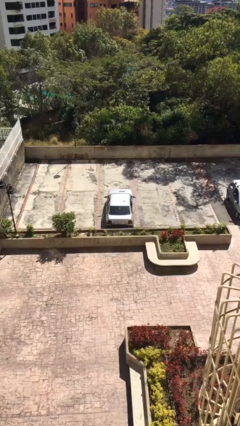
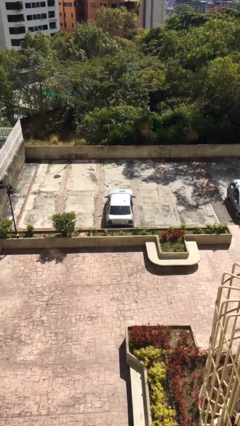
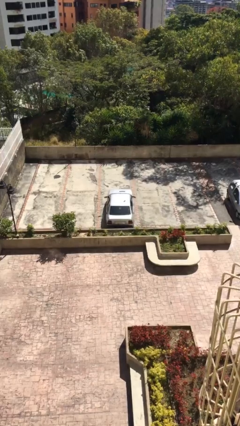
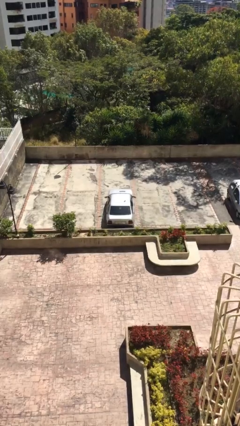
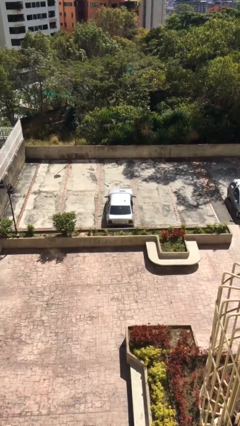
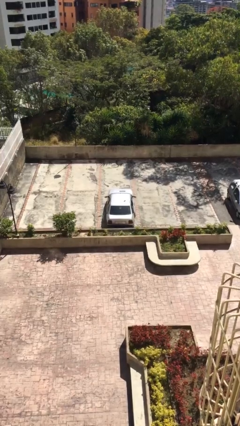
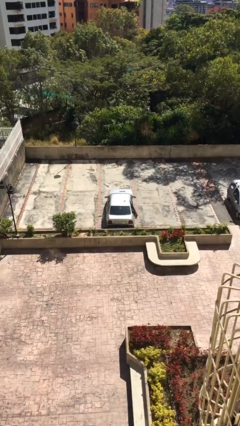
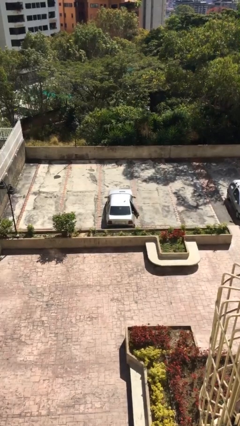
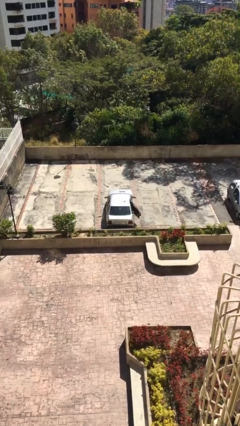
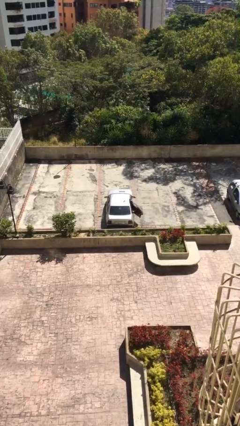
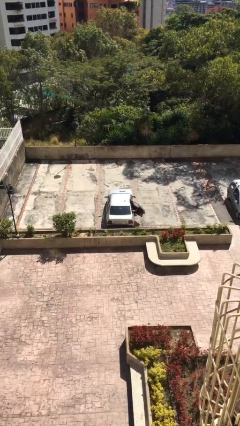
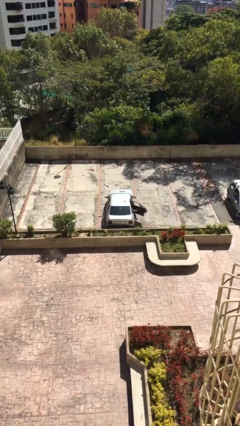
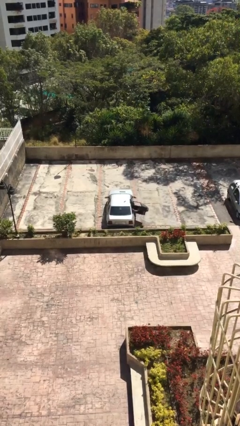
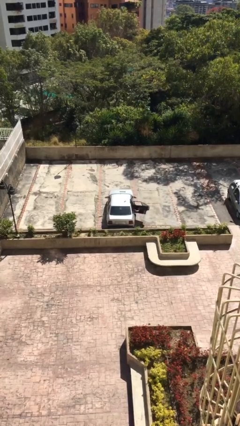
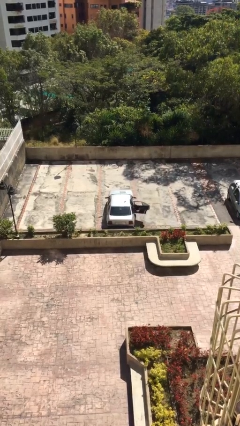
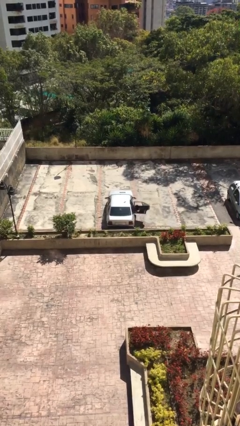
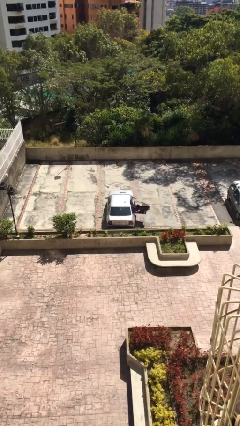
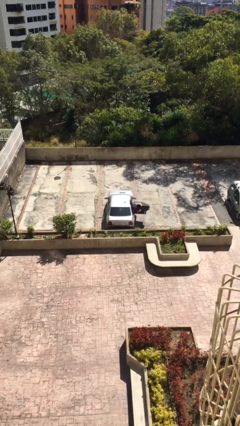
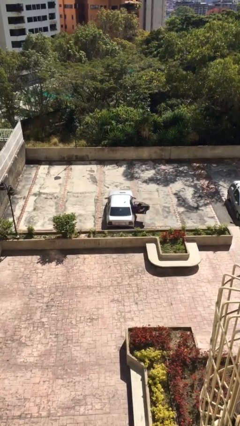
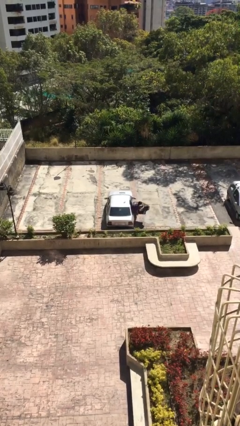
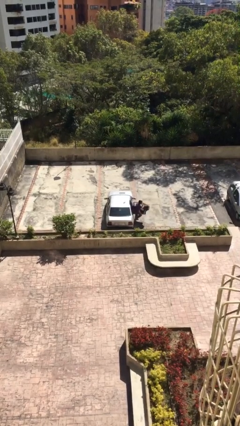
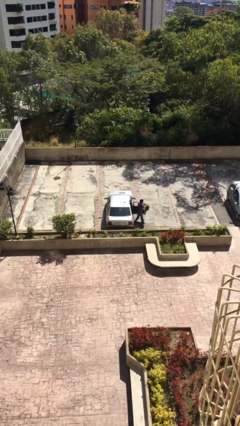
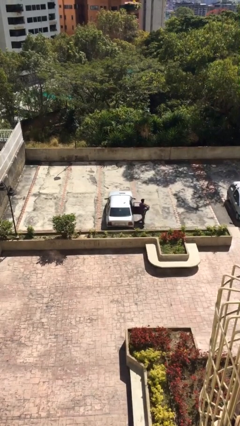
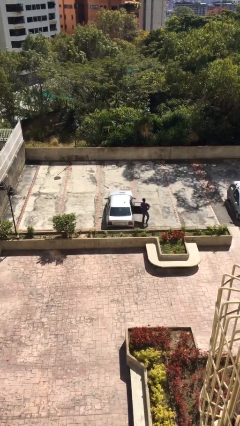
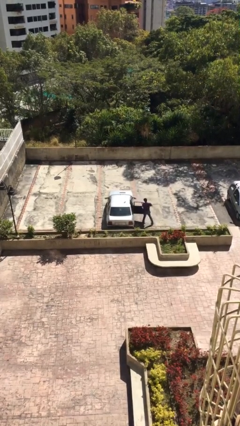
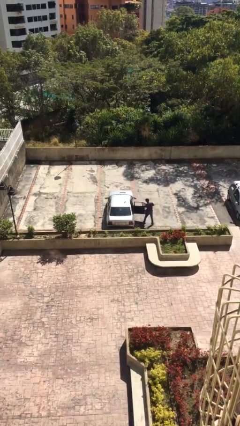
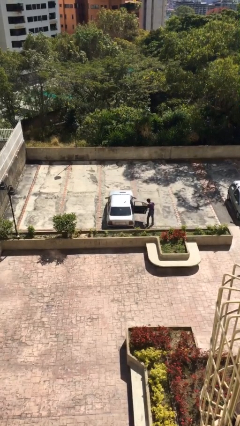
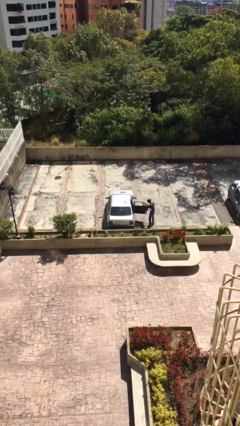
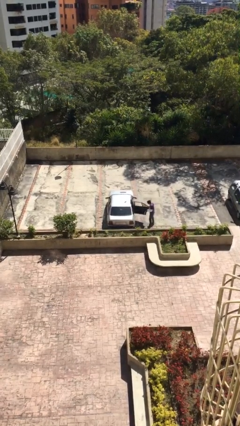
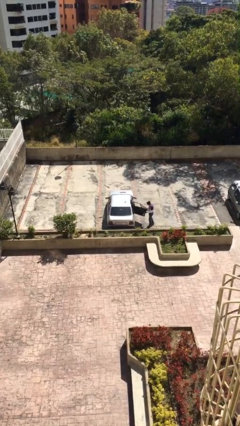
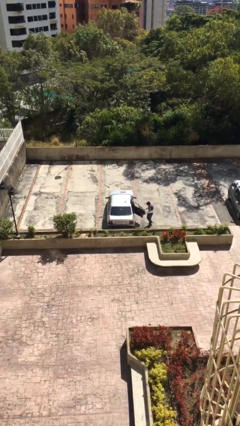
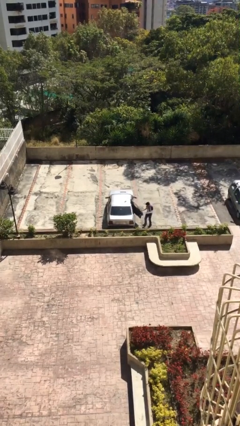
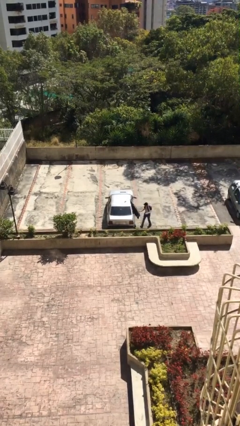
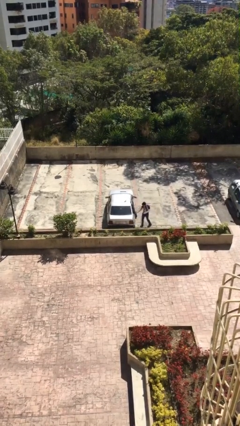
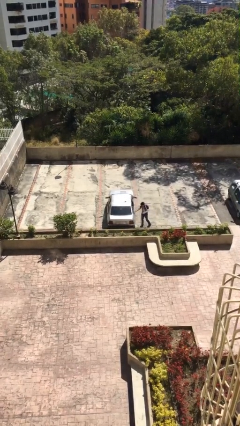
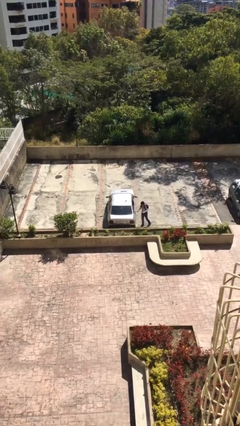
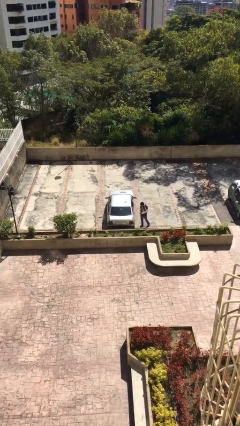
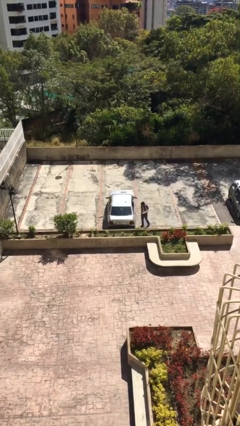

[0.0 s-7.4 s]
car drops off person

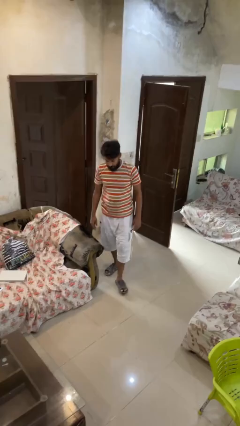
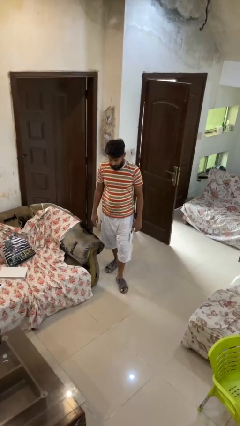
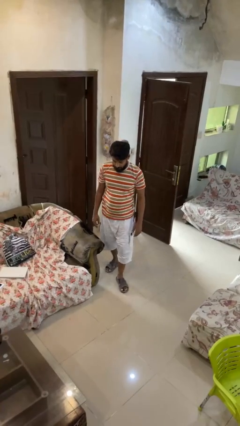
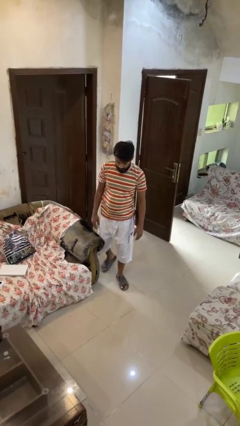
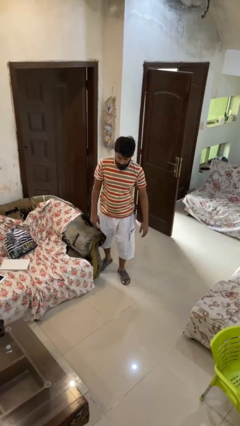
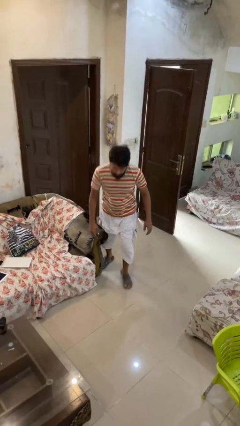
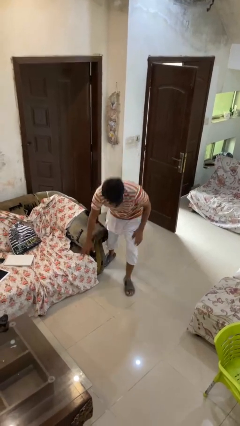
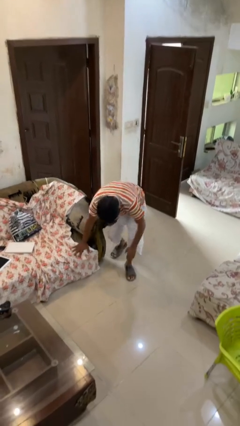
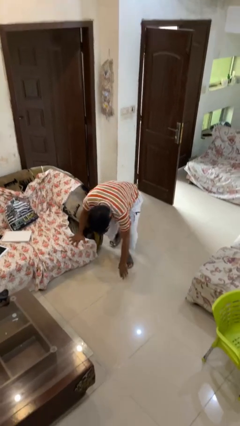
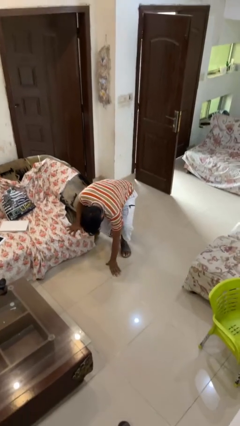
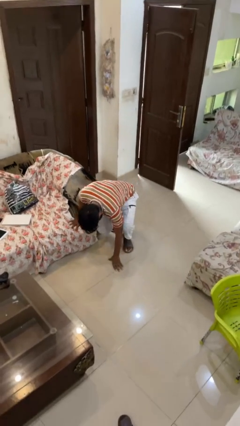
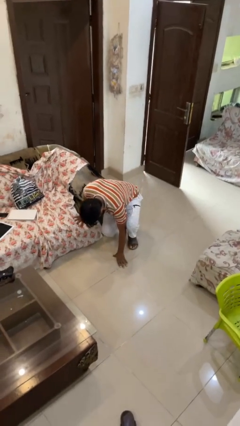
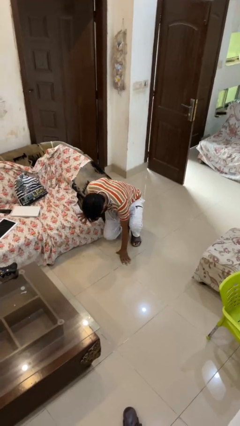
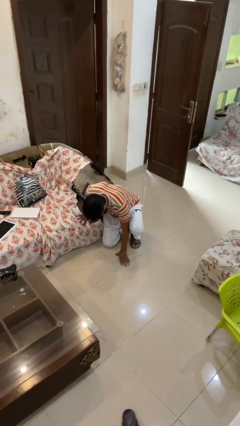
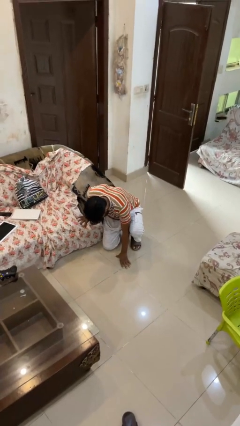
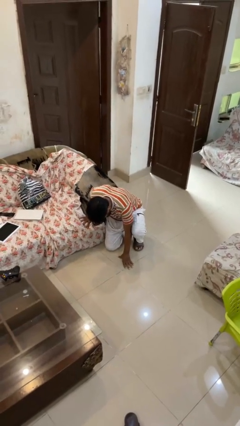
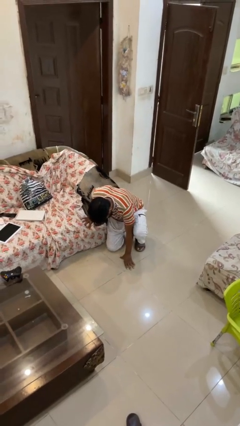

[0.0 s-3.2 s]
person trips on object on floor

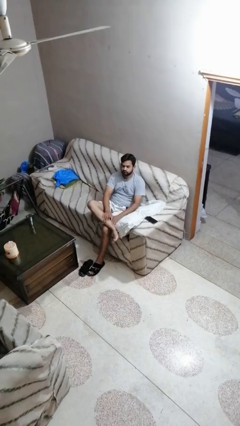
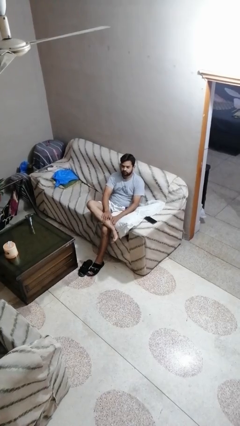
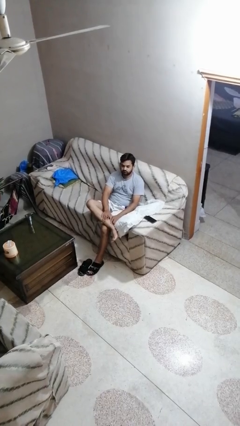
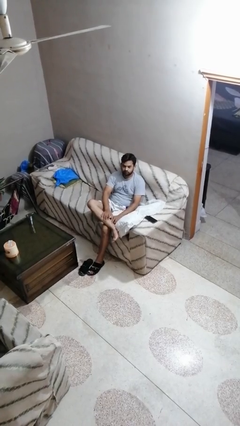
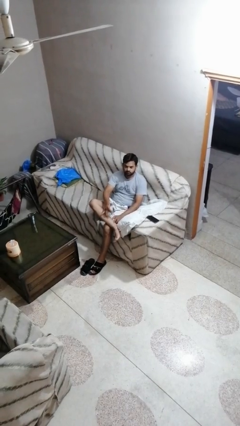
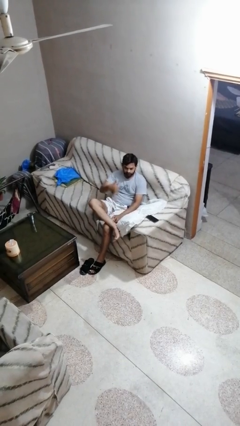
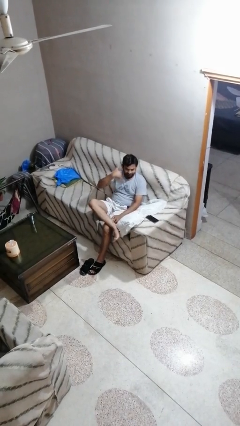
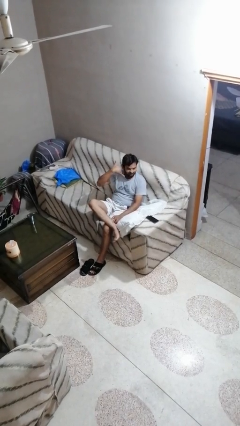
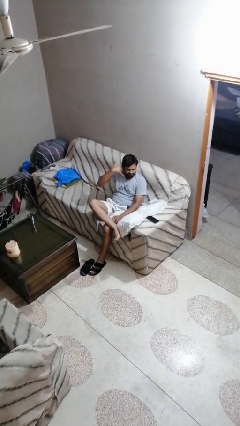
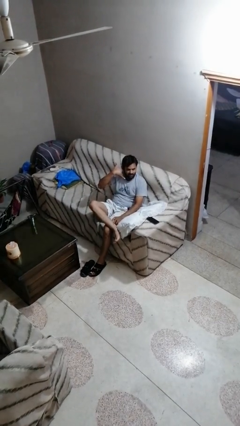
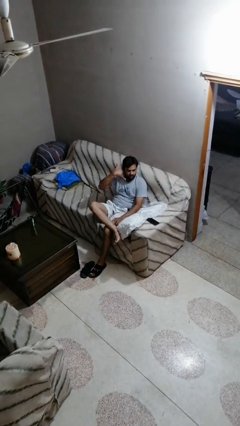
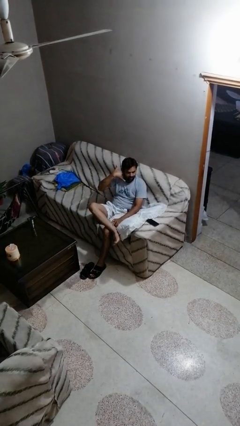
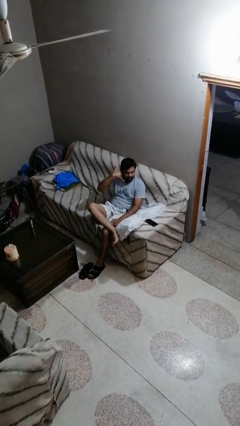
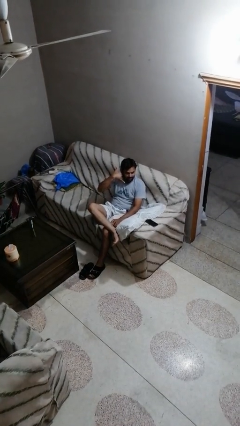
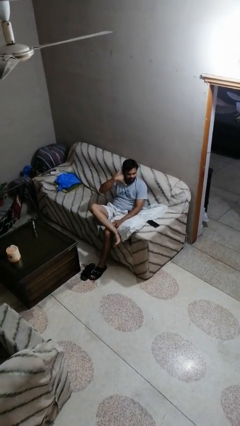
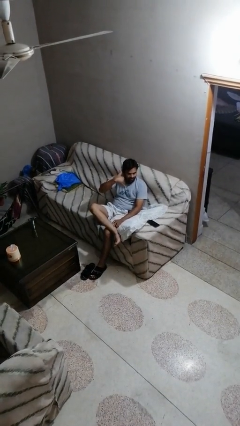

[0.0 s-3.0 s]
person gestures call me

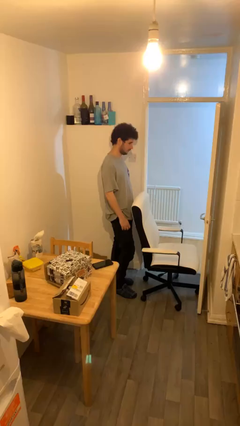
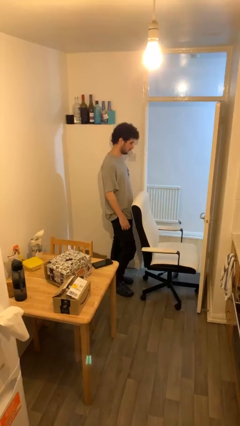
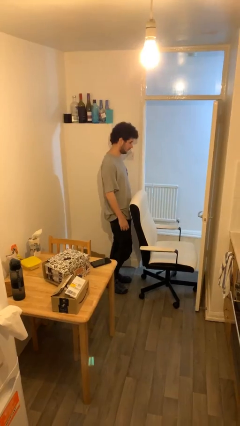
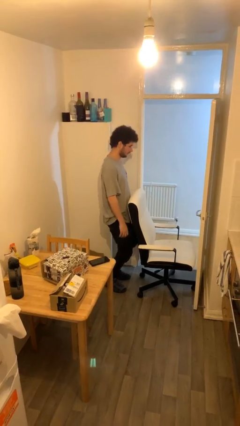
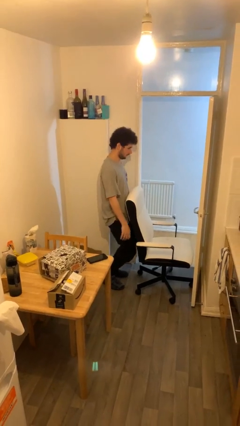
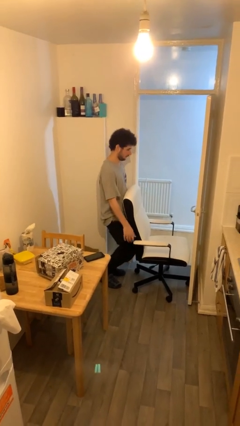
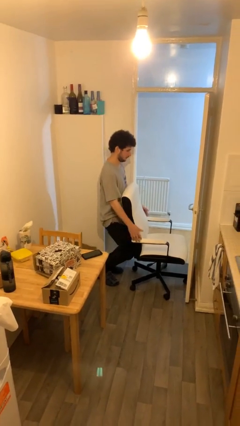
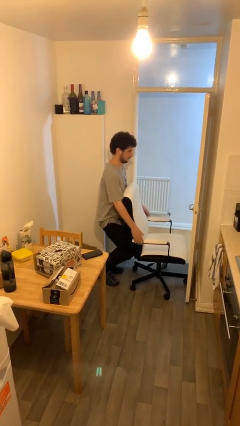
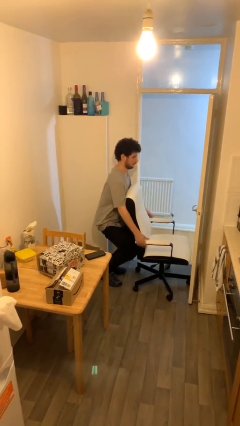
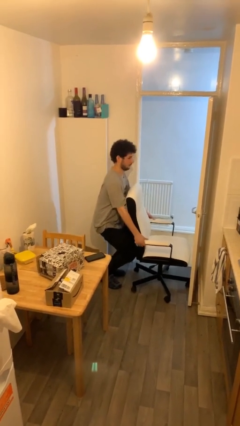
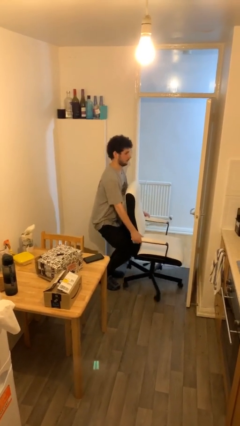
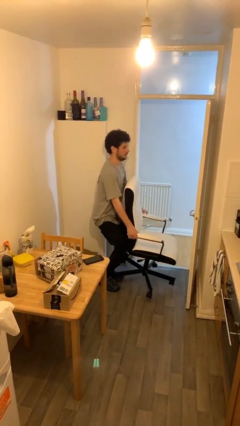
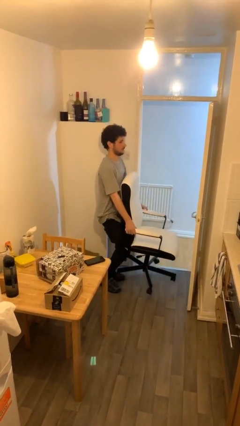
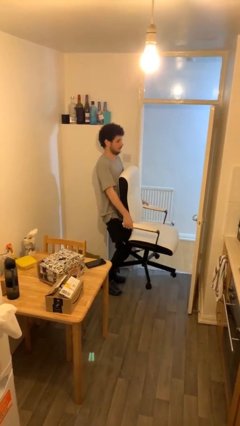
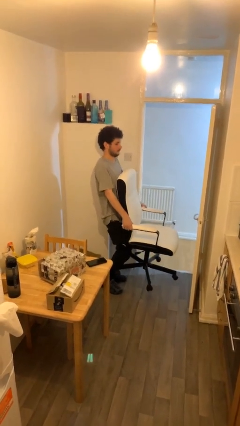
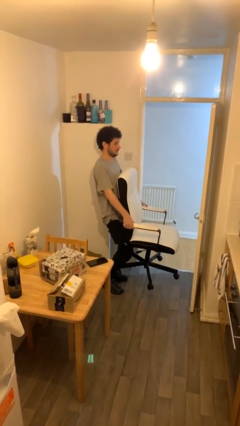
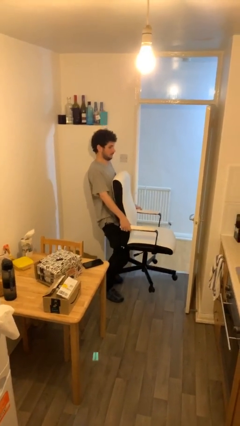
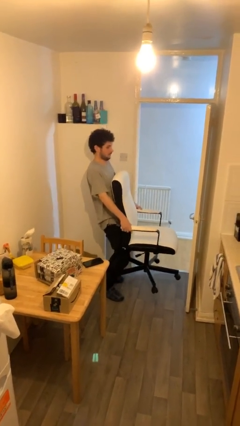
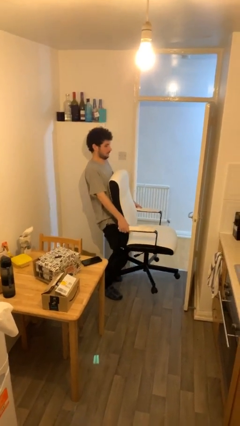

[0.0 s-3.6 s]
person picks up object from floor

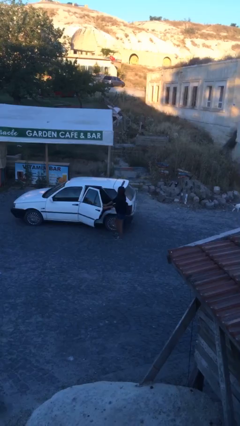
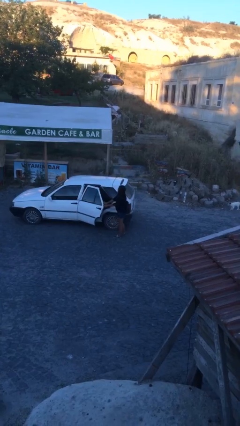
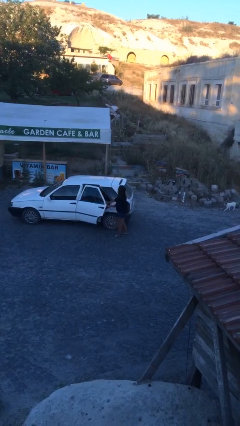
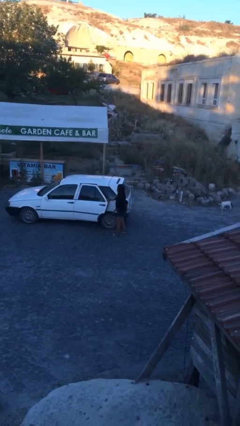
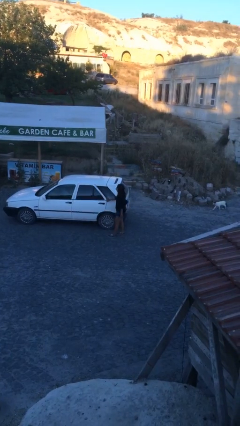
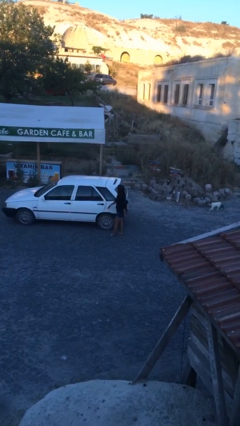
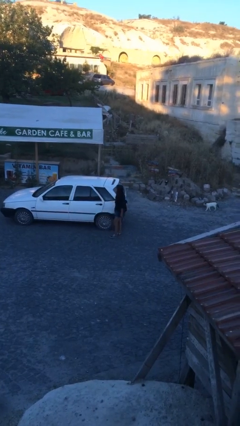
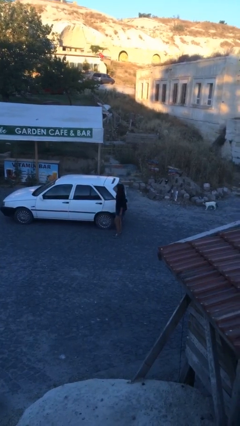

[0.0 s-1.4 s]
person closes car door
